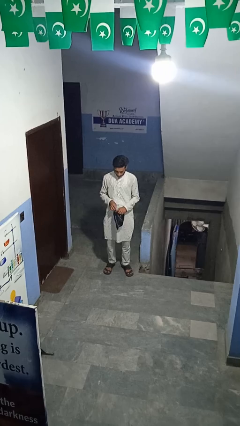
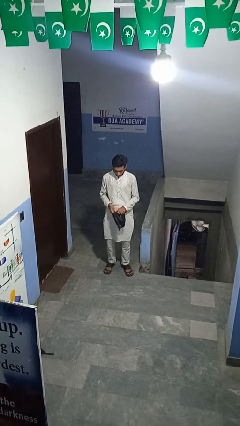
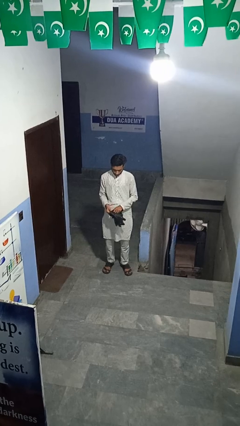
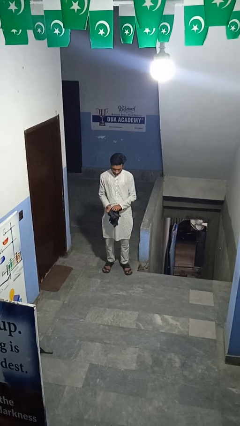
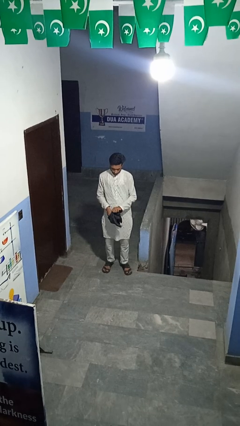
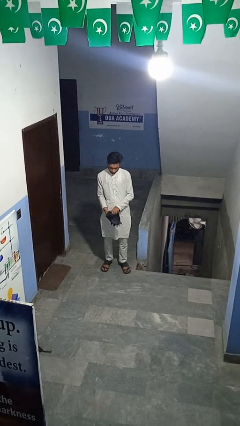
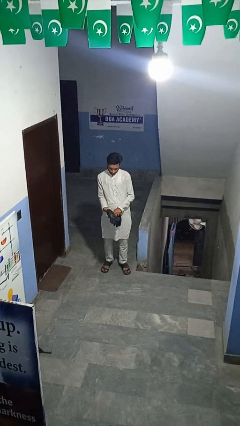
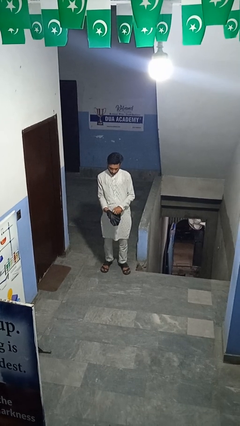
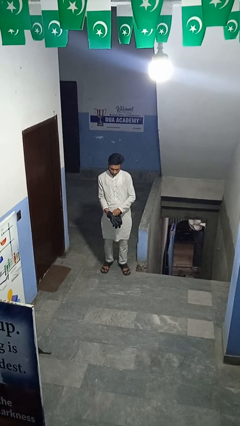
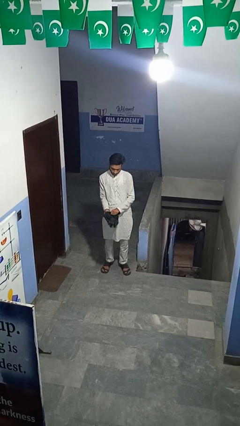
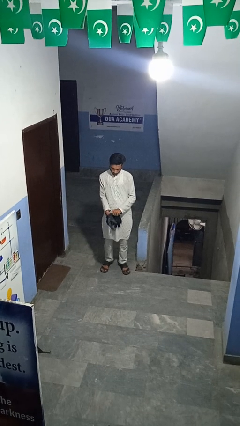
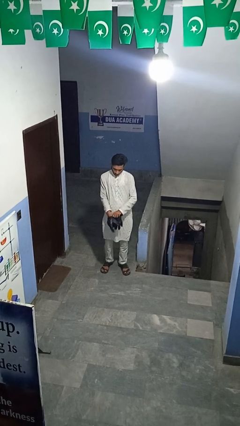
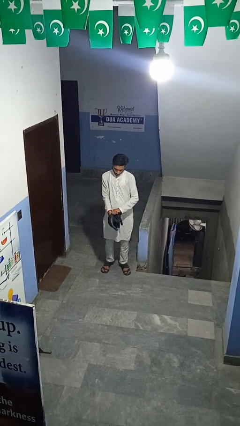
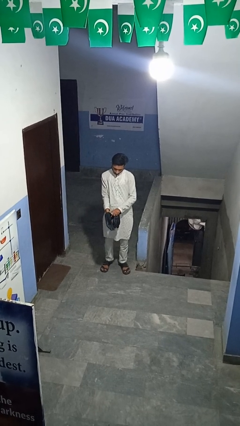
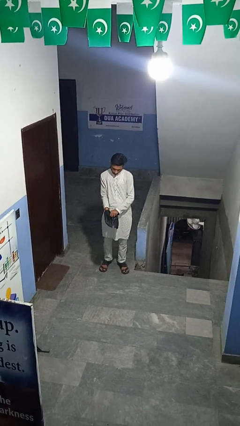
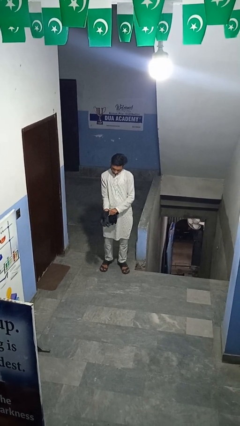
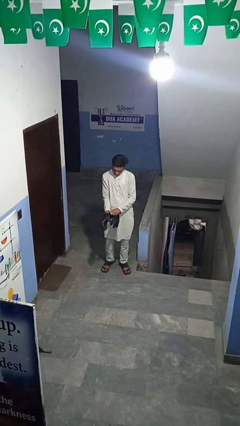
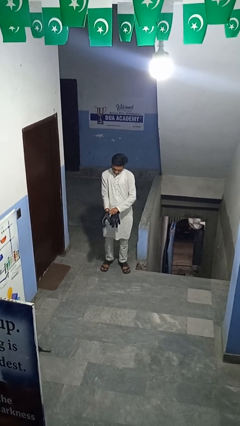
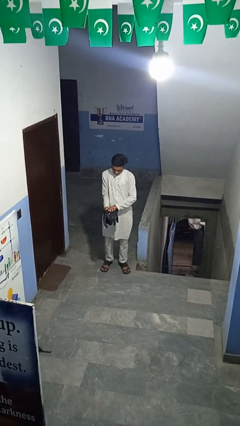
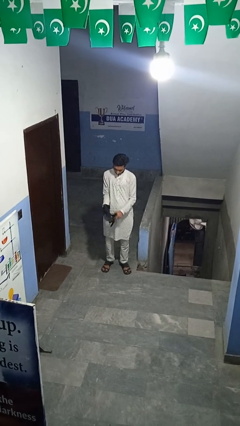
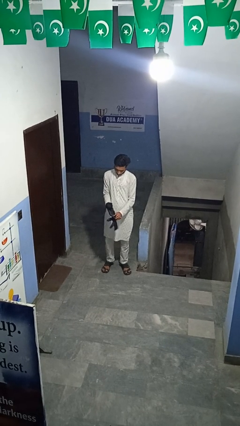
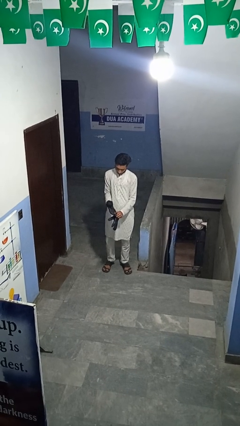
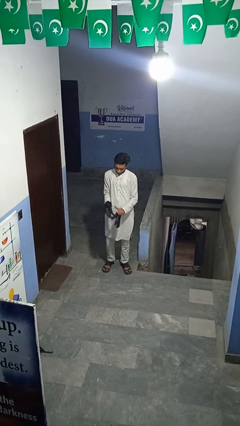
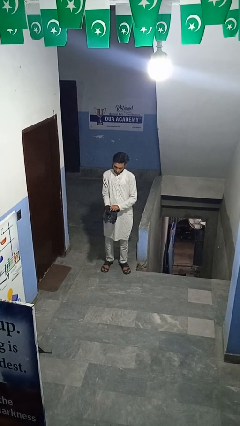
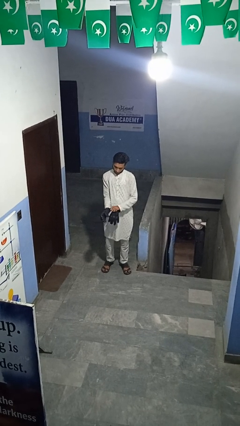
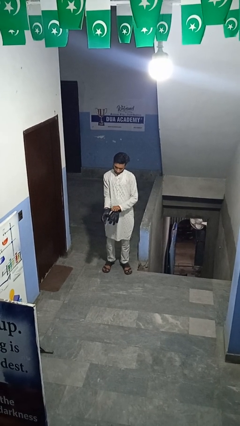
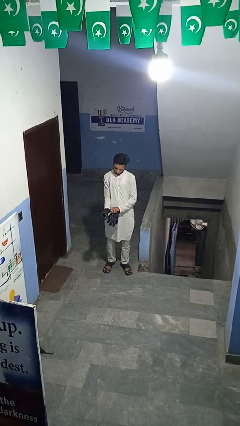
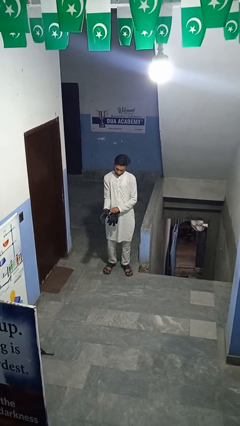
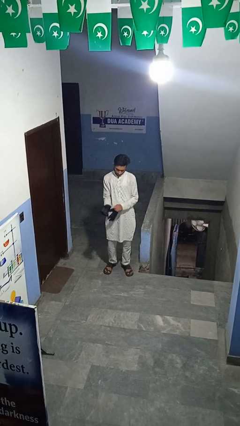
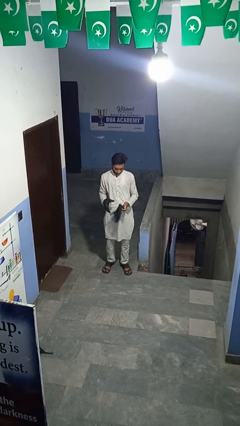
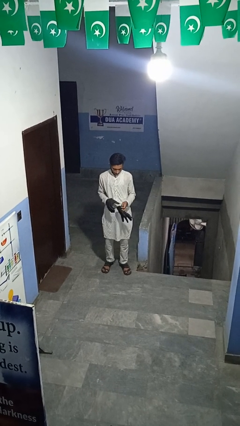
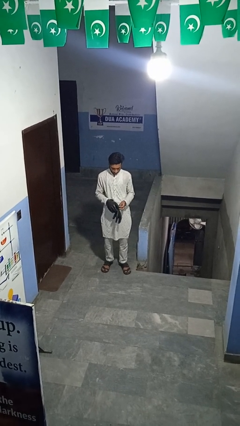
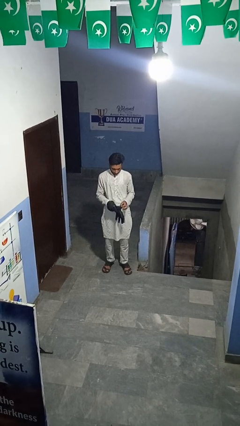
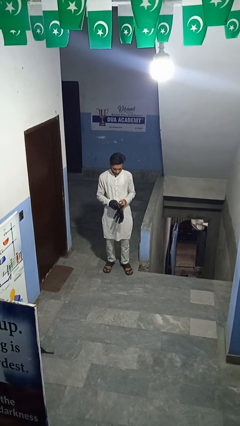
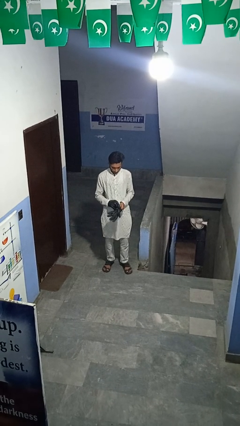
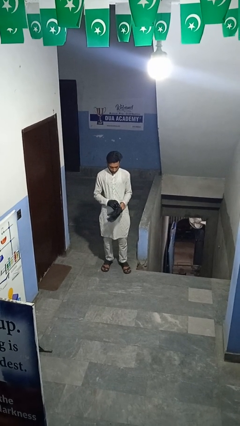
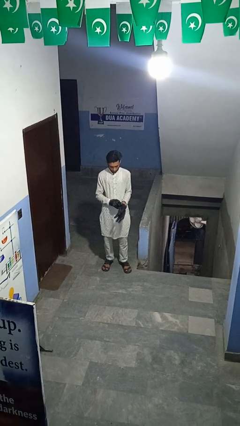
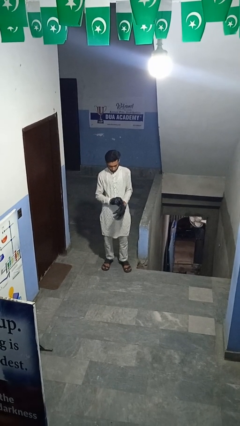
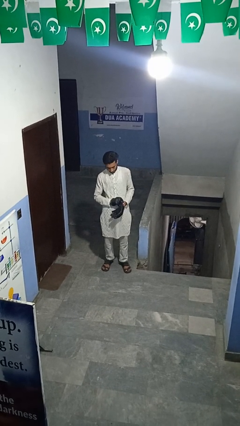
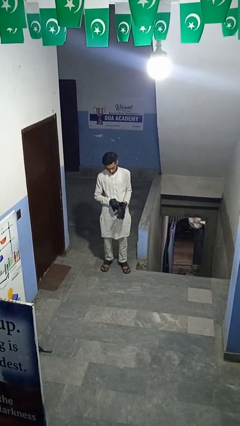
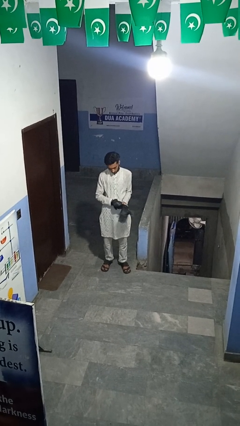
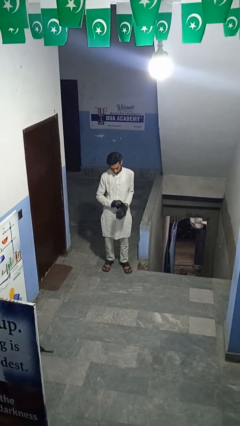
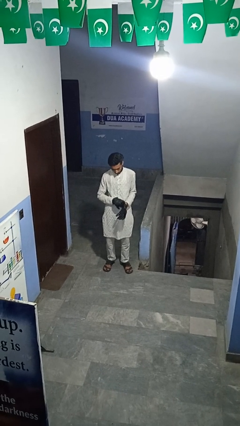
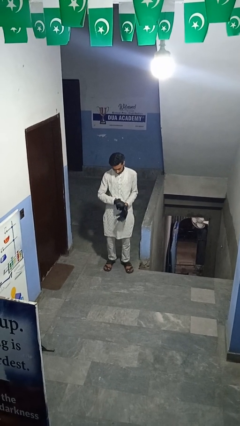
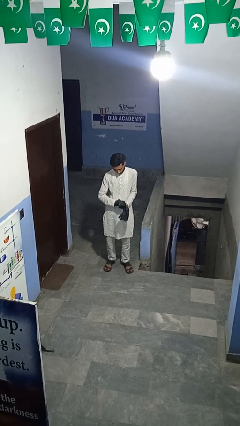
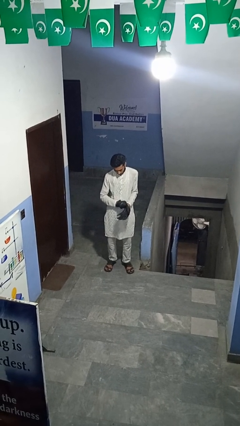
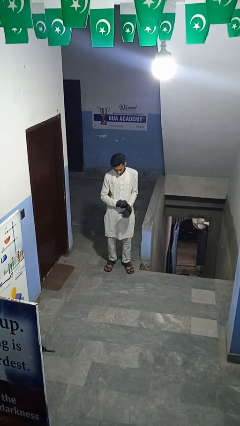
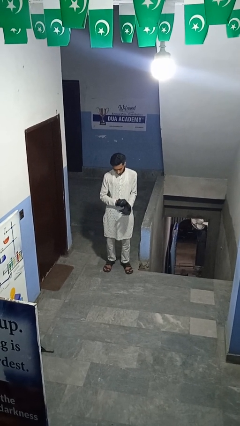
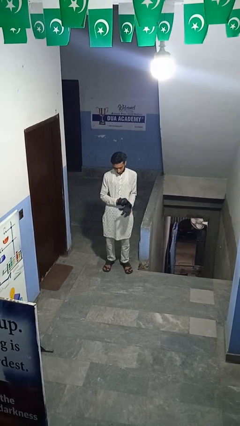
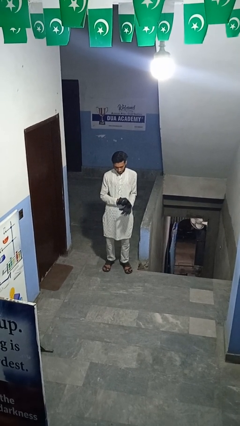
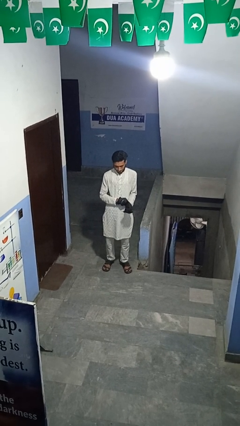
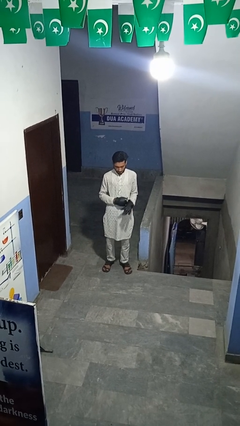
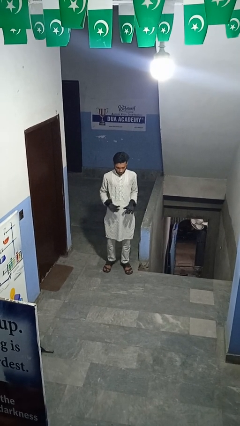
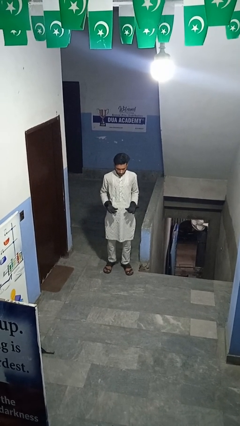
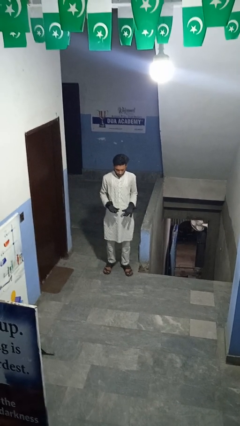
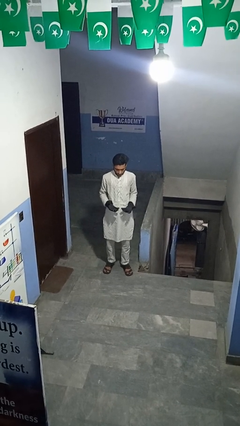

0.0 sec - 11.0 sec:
person puts on gloves

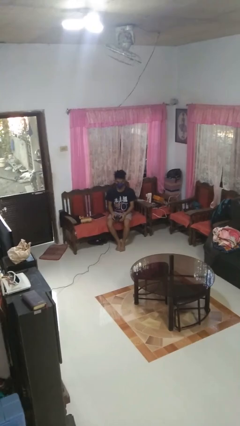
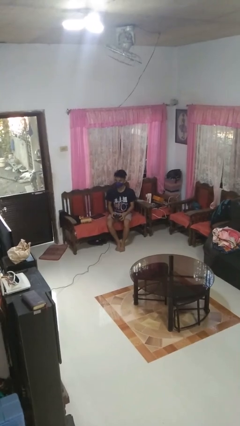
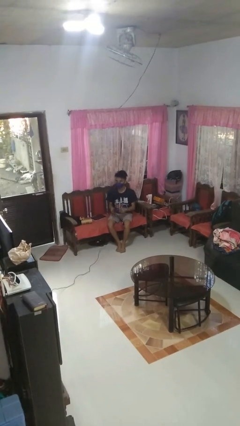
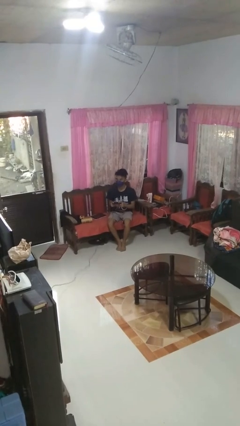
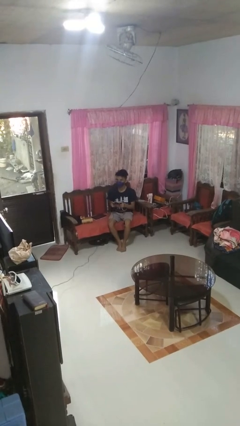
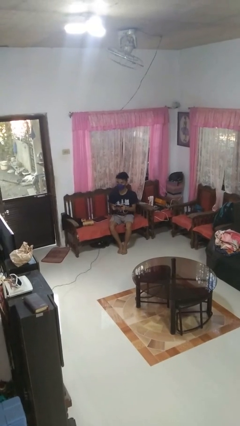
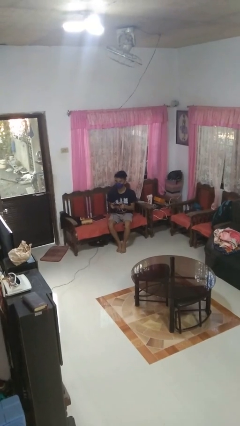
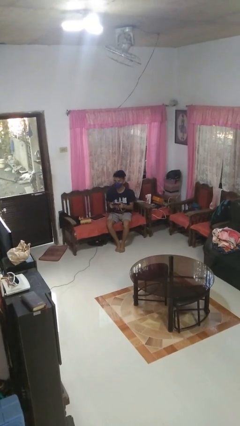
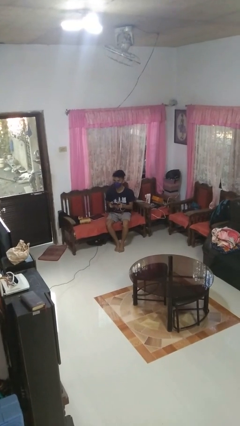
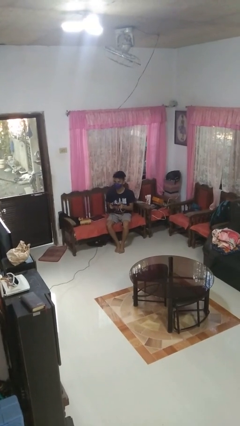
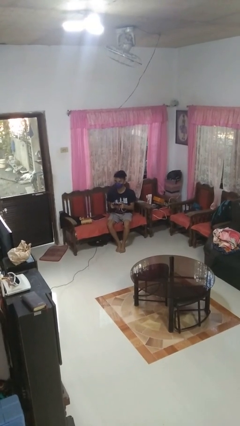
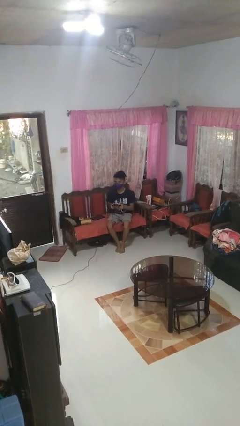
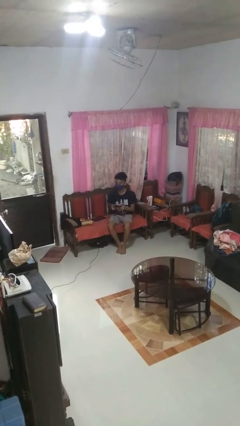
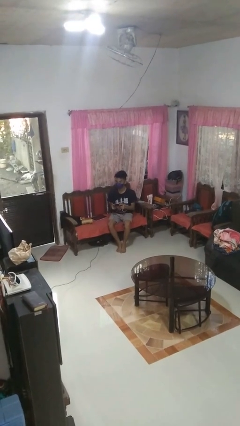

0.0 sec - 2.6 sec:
person interacts with handheld game

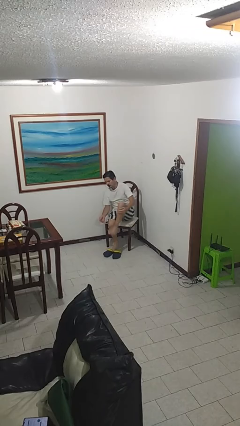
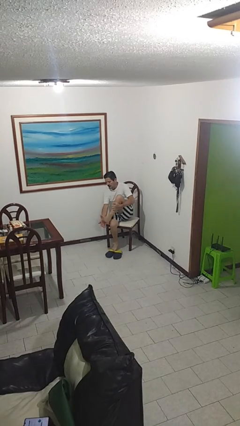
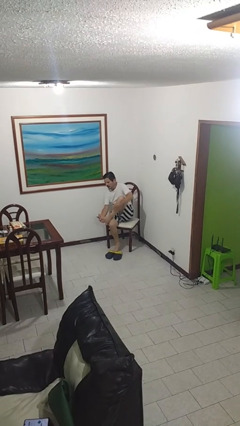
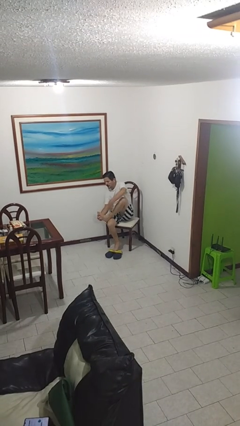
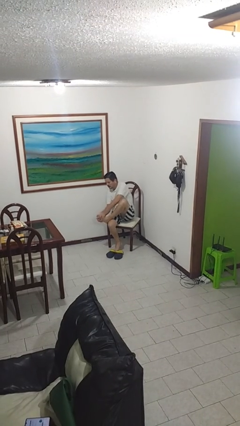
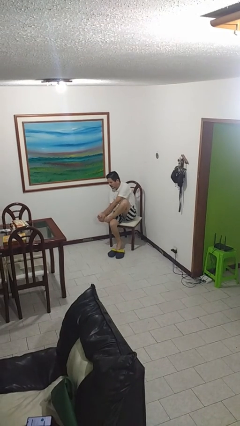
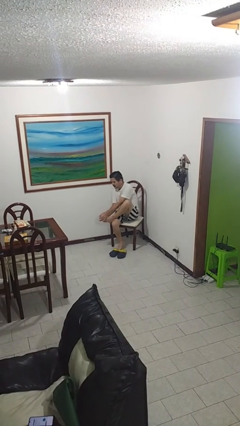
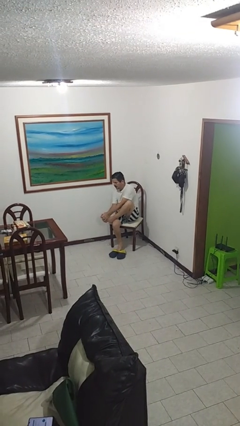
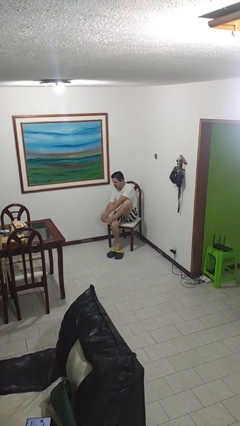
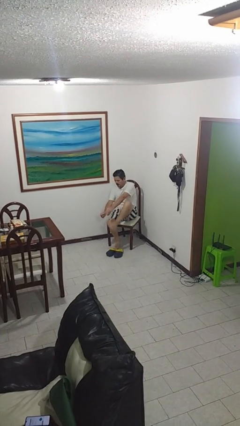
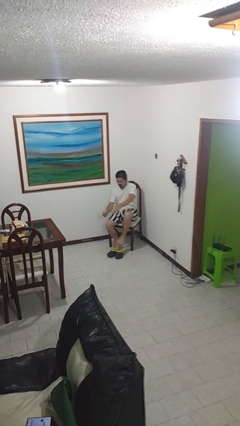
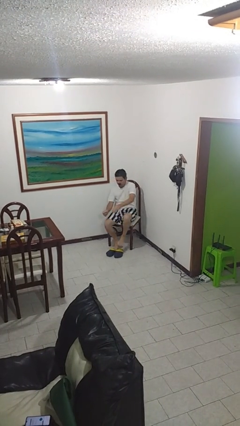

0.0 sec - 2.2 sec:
person rubs foot

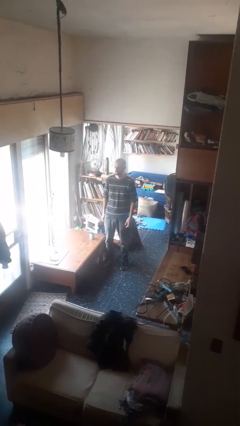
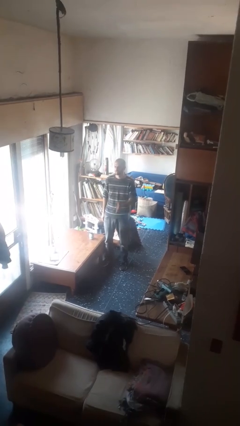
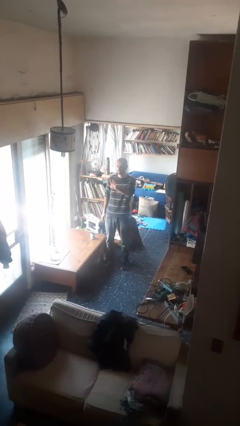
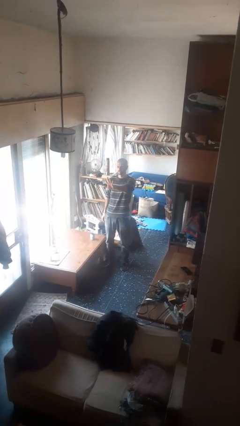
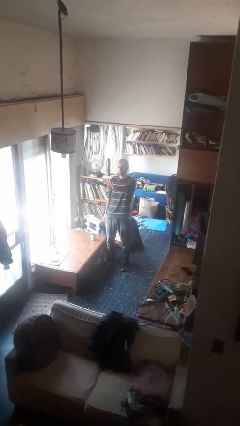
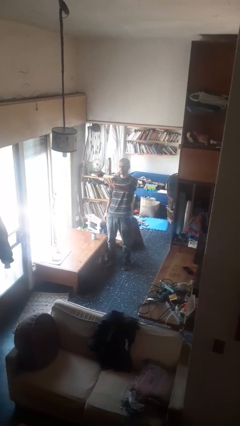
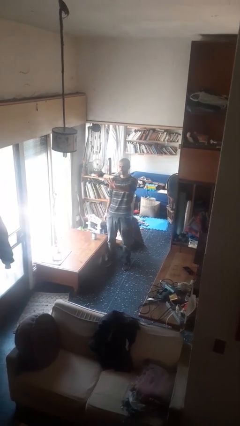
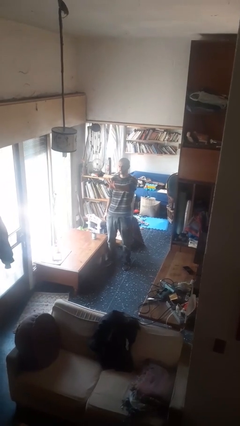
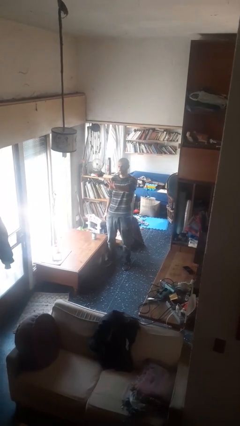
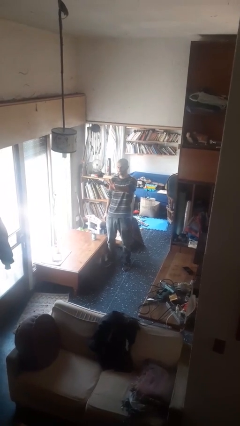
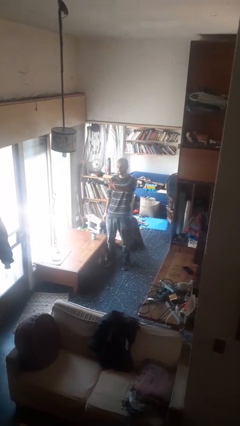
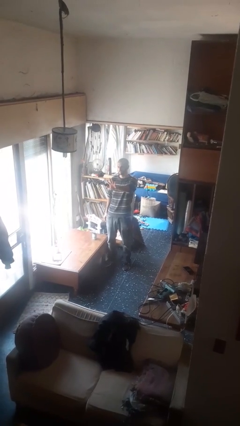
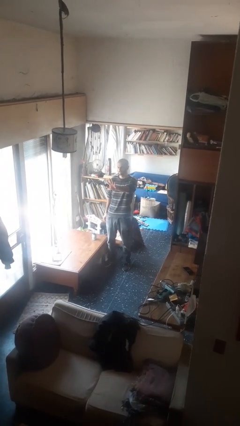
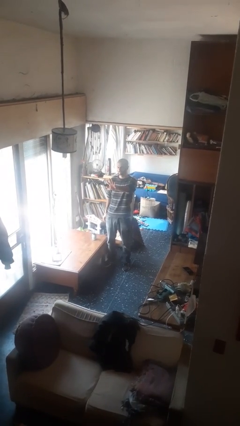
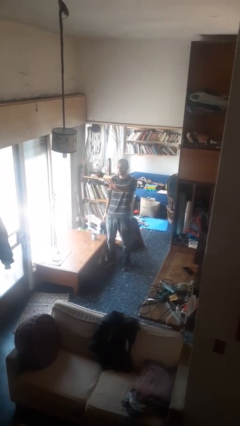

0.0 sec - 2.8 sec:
person gestures number five
